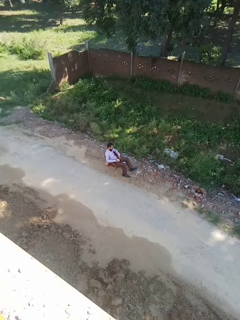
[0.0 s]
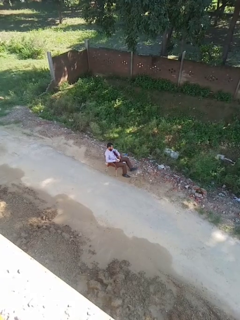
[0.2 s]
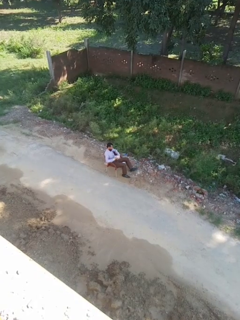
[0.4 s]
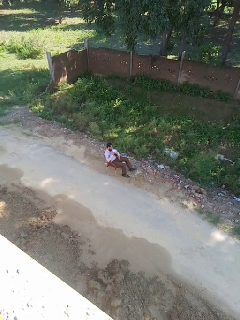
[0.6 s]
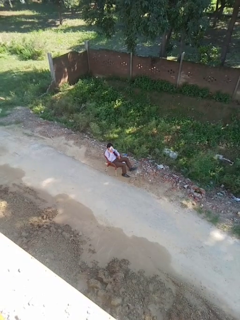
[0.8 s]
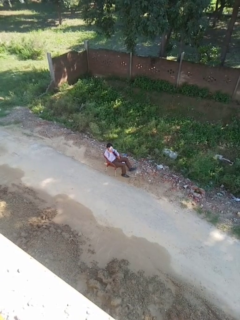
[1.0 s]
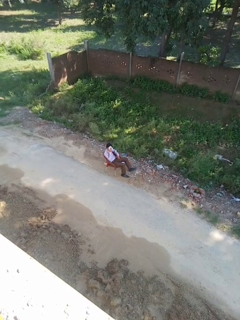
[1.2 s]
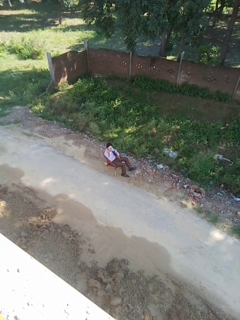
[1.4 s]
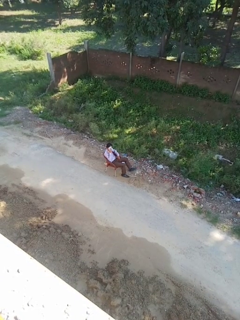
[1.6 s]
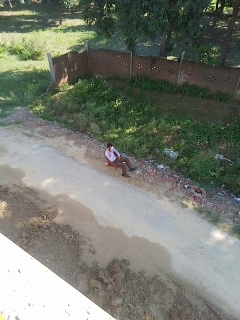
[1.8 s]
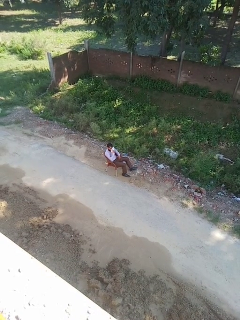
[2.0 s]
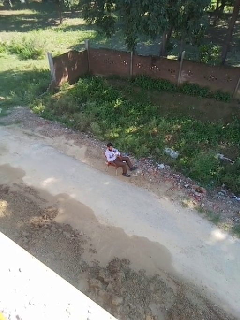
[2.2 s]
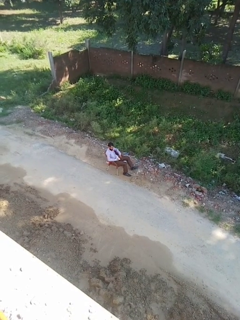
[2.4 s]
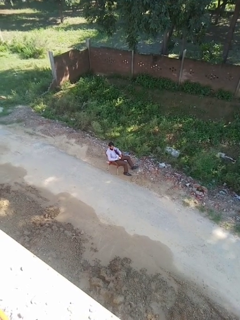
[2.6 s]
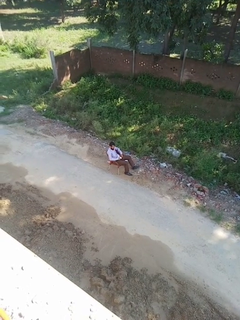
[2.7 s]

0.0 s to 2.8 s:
person wipes mouth with napkin

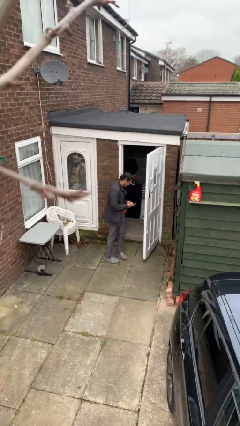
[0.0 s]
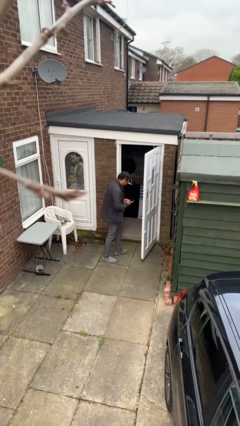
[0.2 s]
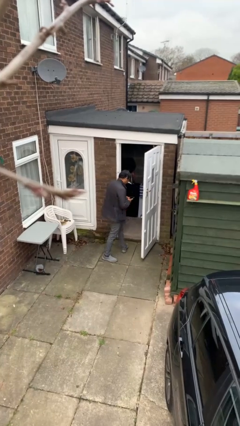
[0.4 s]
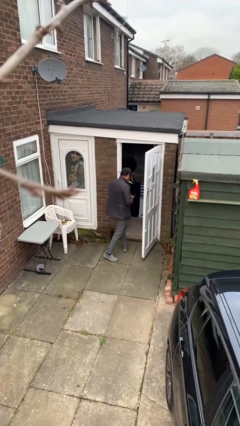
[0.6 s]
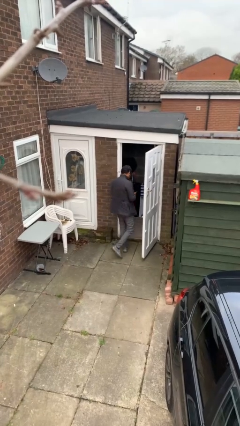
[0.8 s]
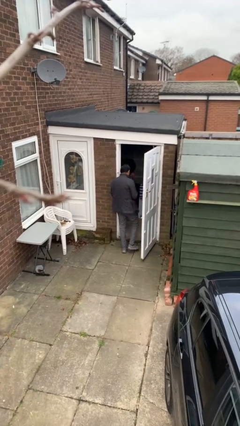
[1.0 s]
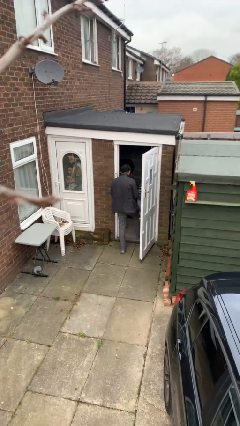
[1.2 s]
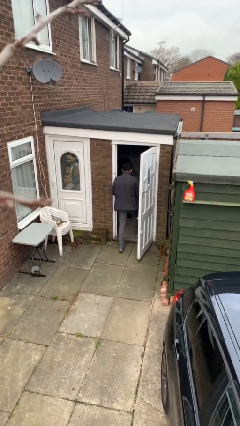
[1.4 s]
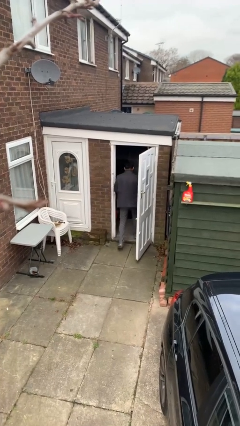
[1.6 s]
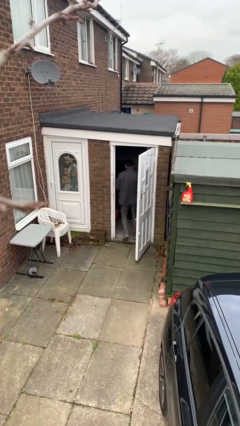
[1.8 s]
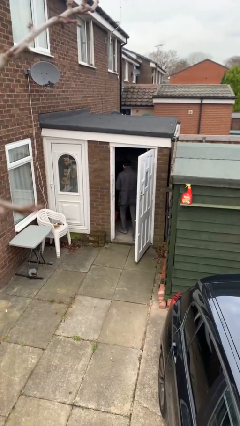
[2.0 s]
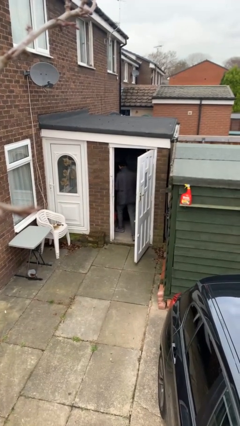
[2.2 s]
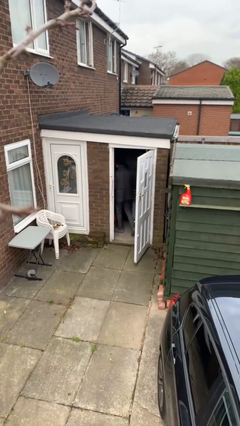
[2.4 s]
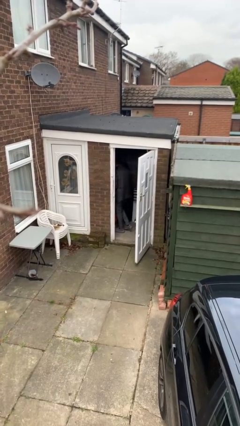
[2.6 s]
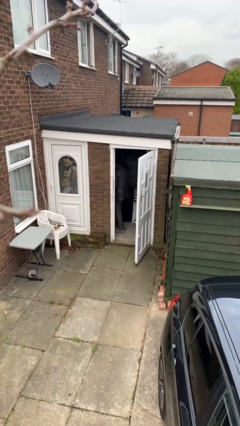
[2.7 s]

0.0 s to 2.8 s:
person exits scene through structure

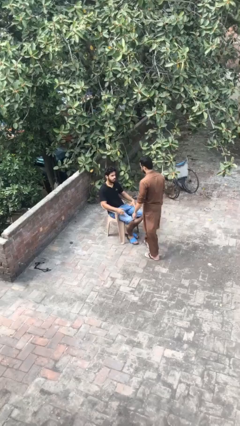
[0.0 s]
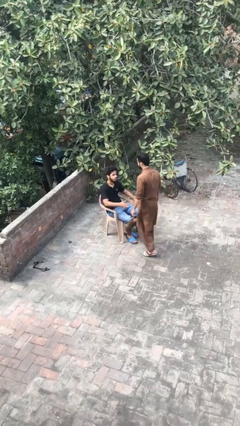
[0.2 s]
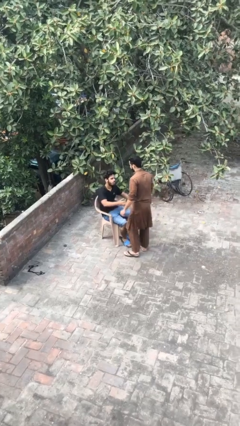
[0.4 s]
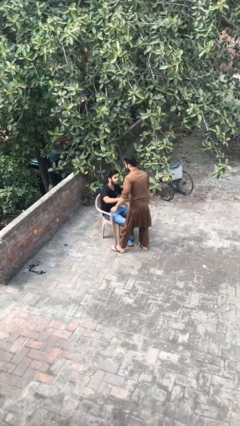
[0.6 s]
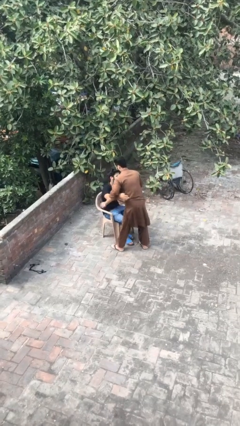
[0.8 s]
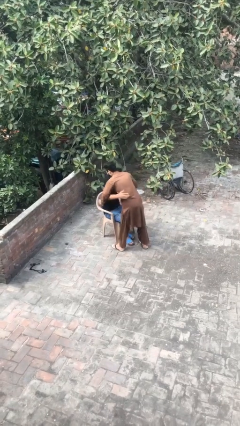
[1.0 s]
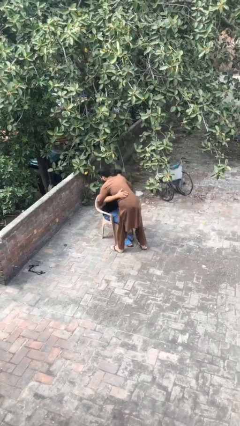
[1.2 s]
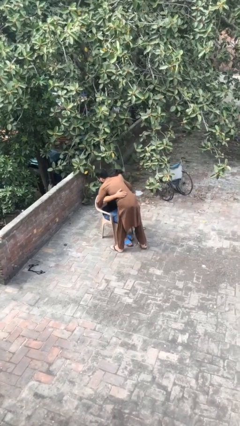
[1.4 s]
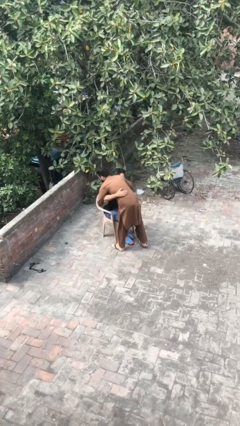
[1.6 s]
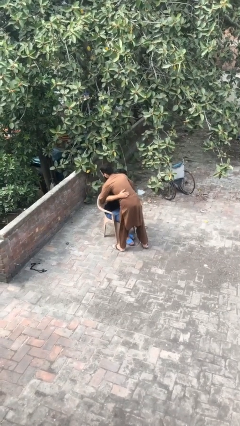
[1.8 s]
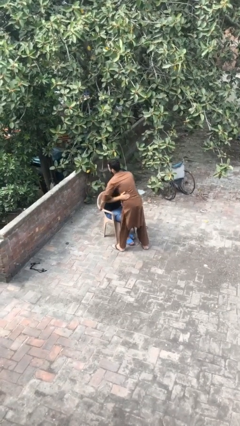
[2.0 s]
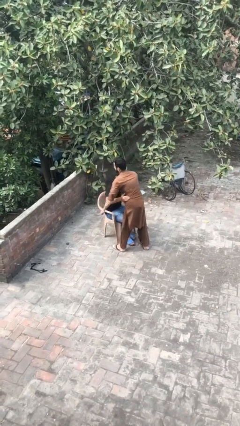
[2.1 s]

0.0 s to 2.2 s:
person embraces person

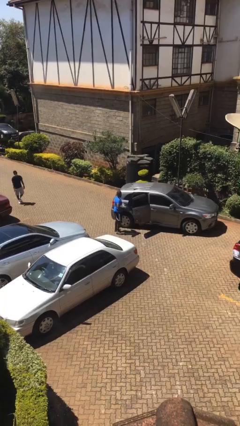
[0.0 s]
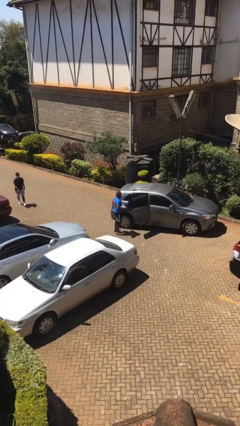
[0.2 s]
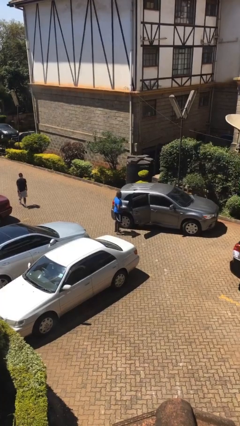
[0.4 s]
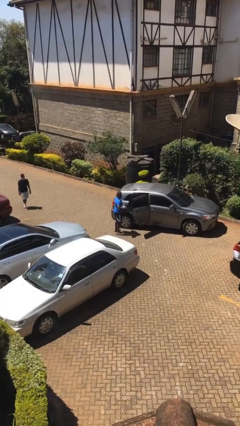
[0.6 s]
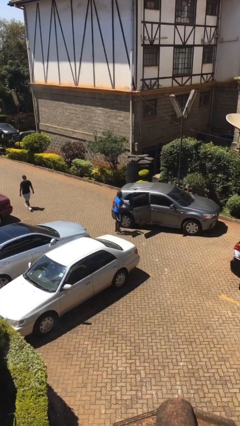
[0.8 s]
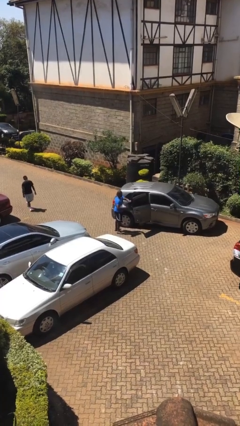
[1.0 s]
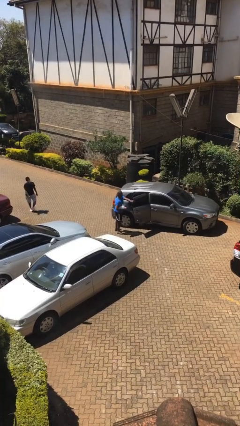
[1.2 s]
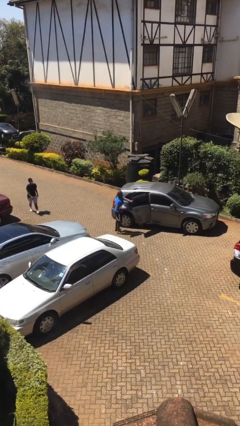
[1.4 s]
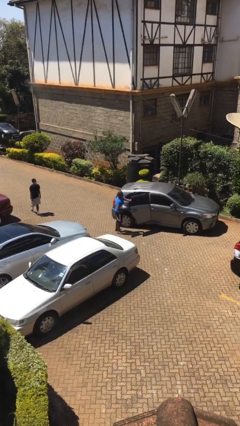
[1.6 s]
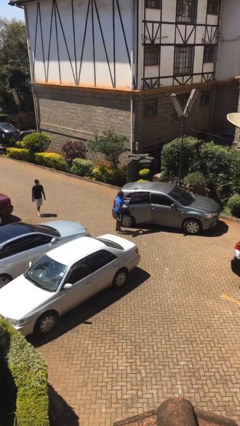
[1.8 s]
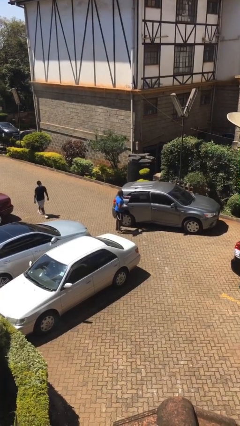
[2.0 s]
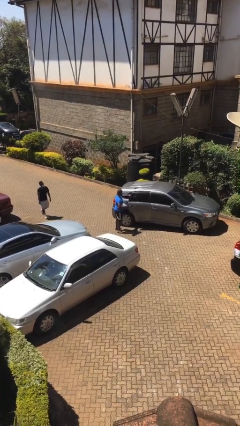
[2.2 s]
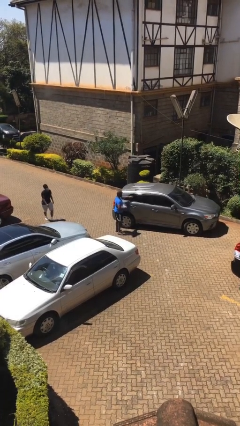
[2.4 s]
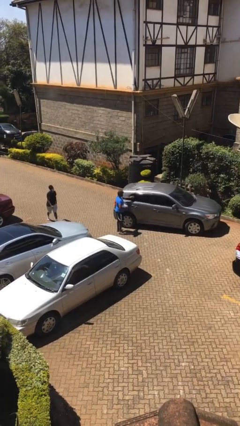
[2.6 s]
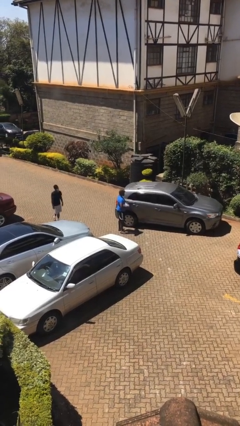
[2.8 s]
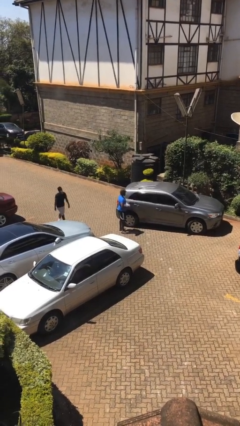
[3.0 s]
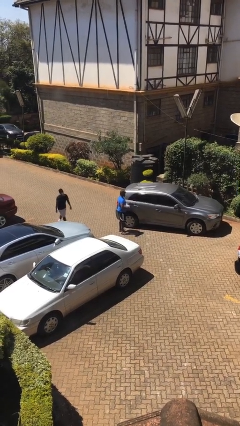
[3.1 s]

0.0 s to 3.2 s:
person closes car door

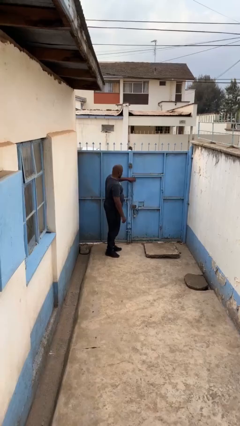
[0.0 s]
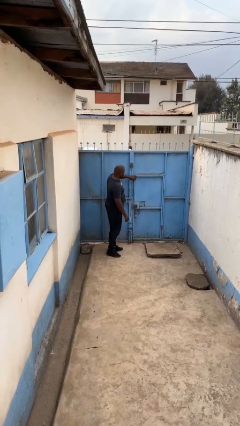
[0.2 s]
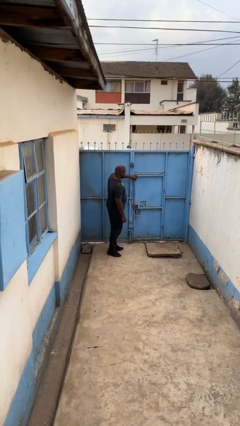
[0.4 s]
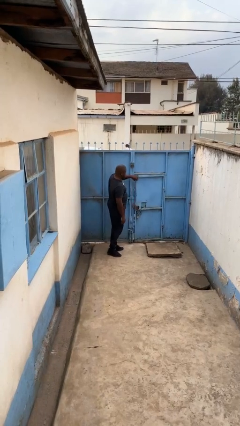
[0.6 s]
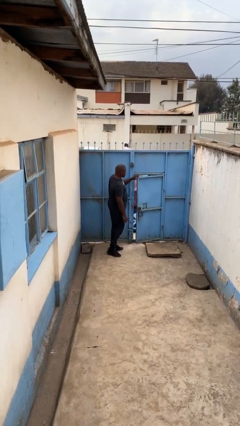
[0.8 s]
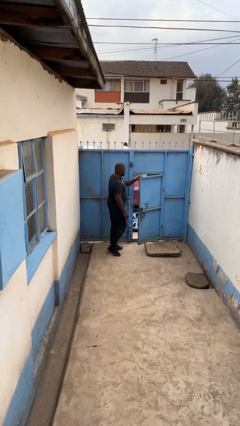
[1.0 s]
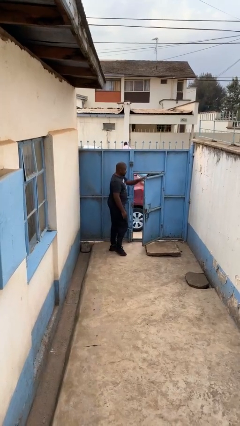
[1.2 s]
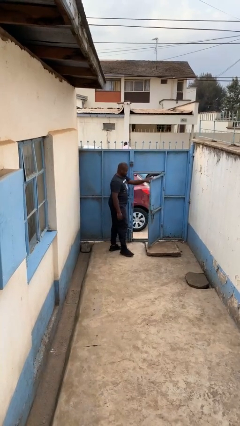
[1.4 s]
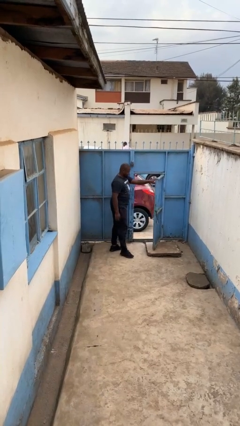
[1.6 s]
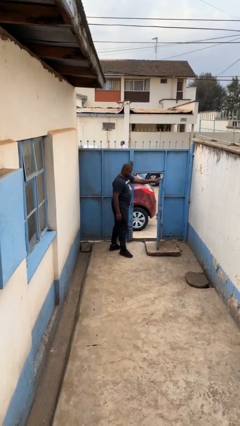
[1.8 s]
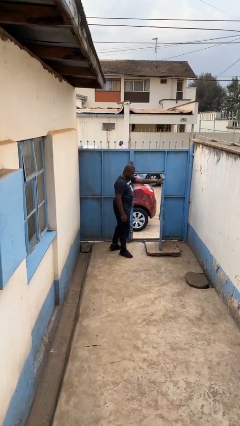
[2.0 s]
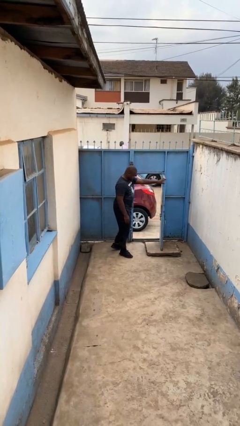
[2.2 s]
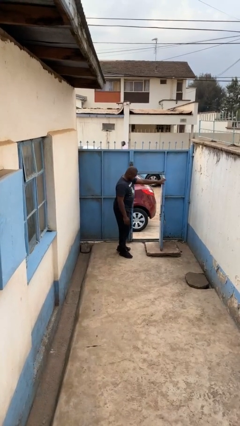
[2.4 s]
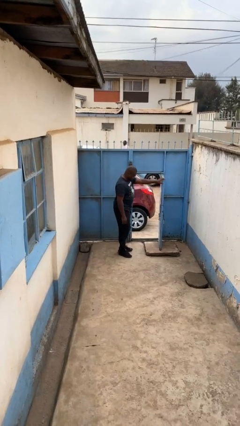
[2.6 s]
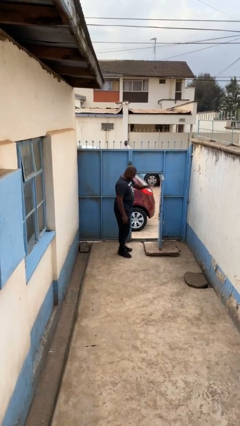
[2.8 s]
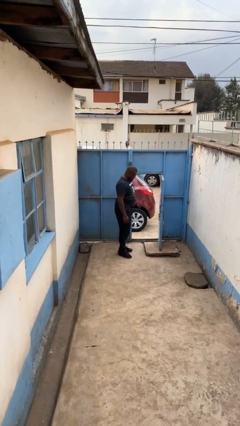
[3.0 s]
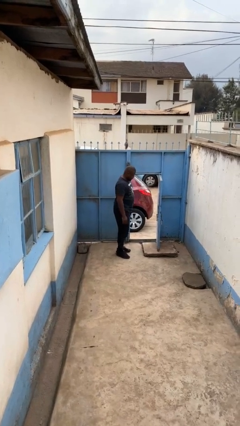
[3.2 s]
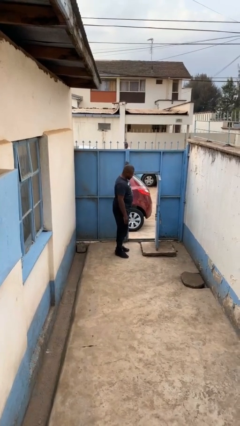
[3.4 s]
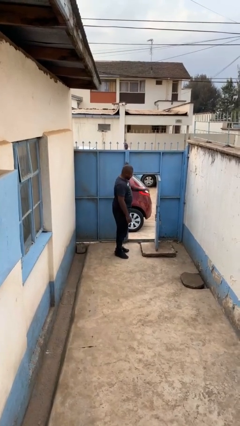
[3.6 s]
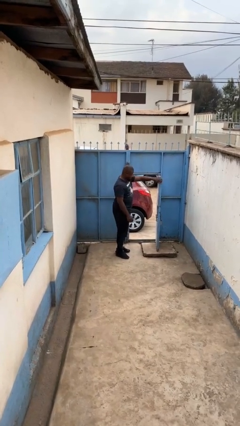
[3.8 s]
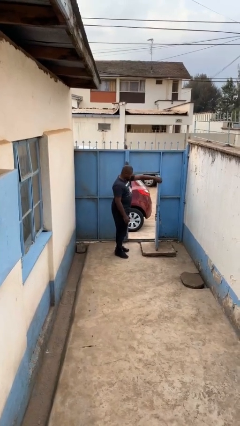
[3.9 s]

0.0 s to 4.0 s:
person opens gate

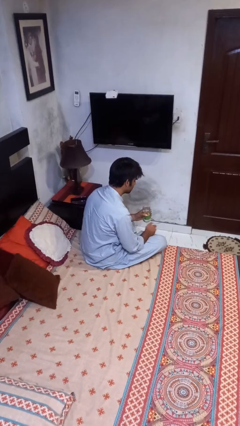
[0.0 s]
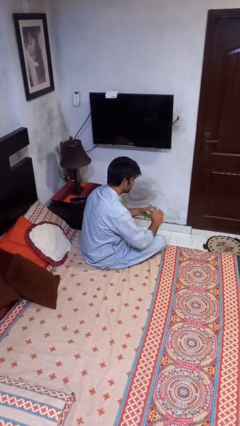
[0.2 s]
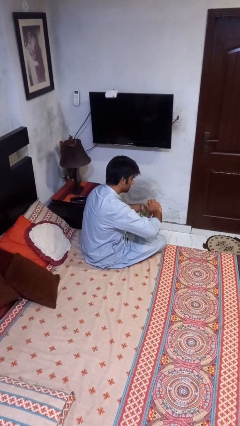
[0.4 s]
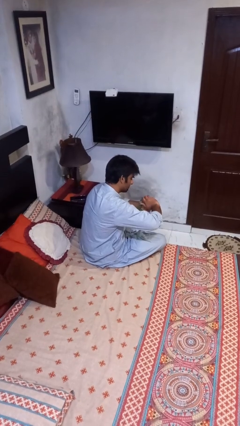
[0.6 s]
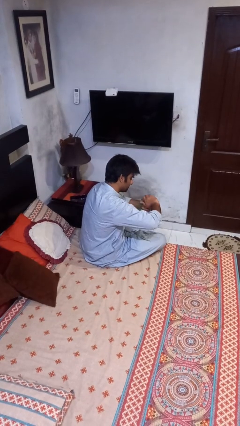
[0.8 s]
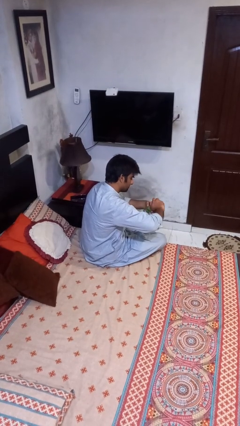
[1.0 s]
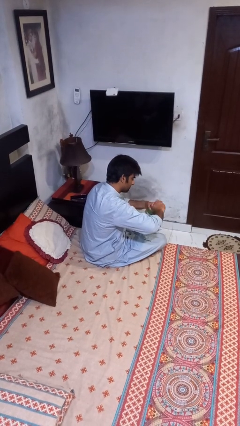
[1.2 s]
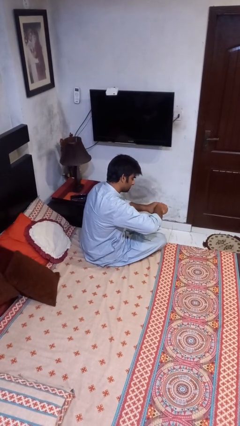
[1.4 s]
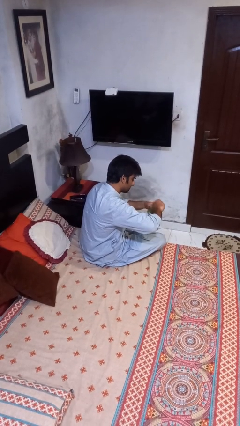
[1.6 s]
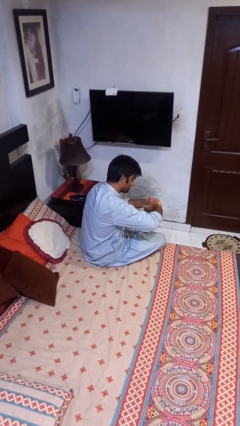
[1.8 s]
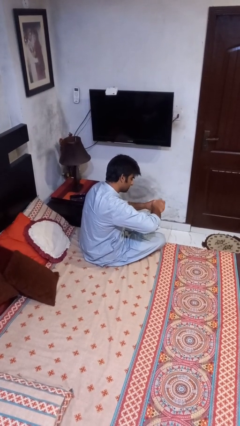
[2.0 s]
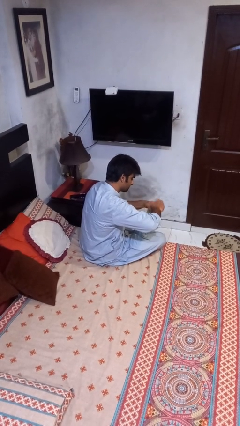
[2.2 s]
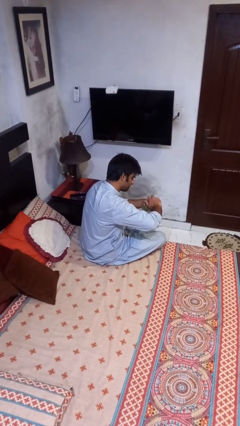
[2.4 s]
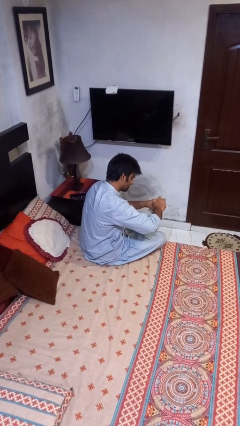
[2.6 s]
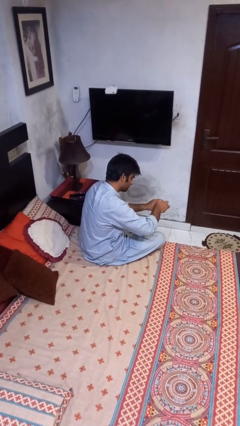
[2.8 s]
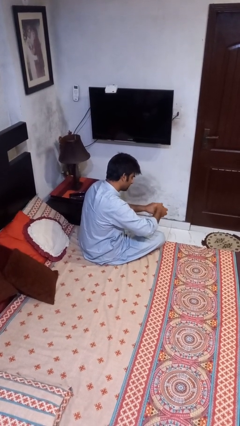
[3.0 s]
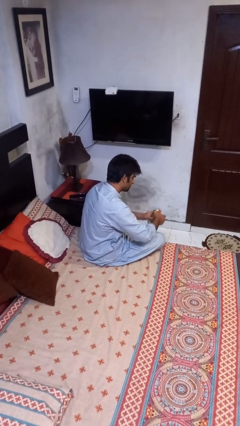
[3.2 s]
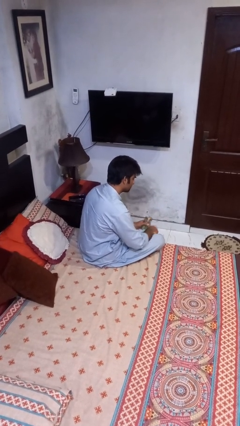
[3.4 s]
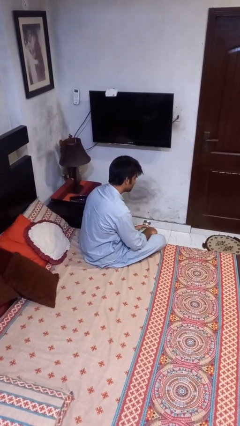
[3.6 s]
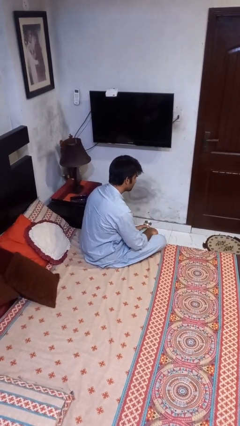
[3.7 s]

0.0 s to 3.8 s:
person closes jar
